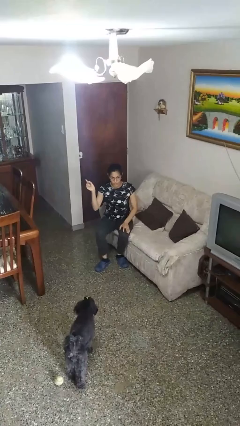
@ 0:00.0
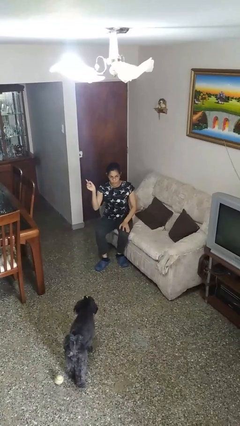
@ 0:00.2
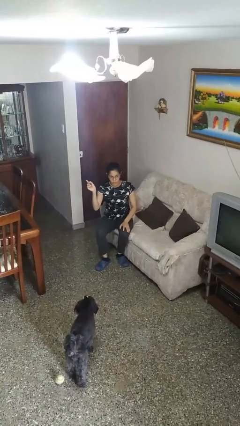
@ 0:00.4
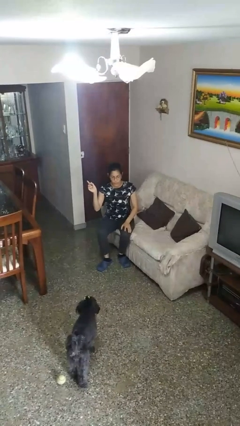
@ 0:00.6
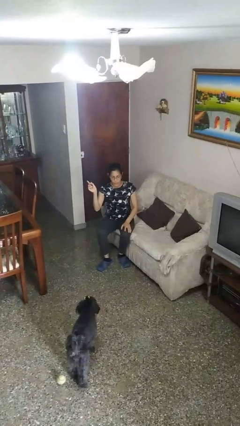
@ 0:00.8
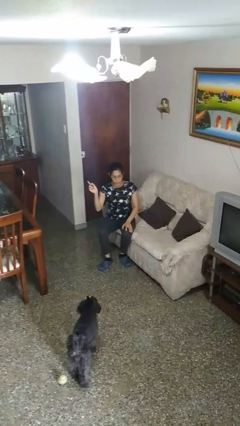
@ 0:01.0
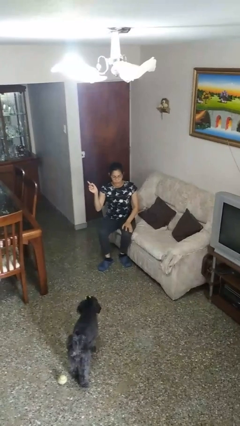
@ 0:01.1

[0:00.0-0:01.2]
person gestures swipe right

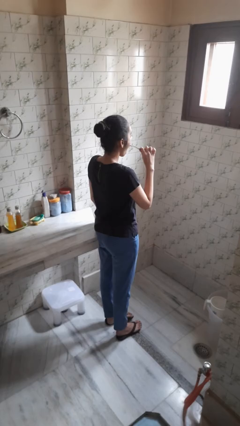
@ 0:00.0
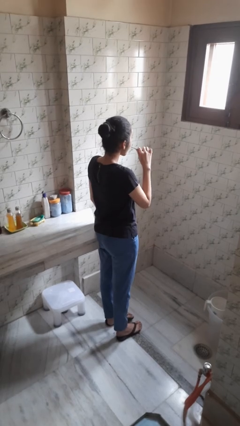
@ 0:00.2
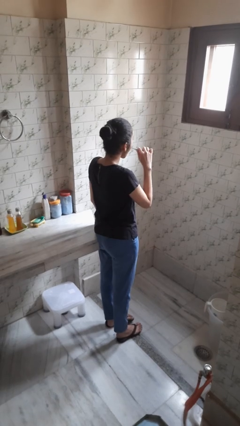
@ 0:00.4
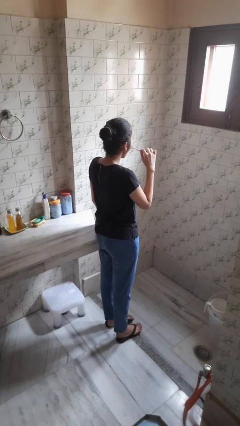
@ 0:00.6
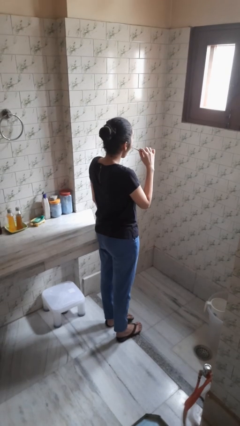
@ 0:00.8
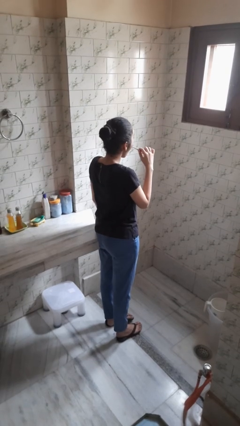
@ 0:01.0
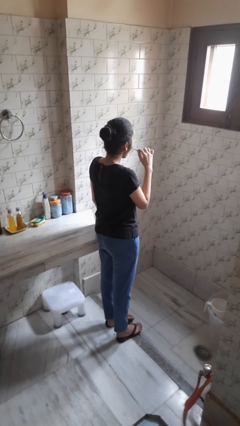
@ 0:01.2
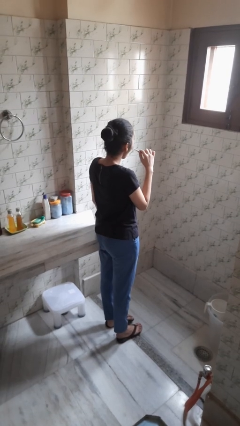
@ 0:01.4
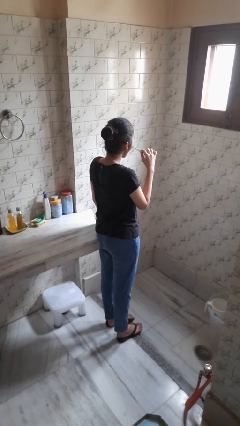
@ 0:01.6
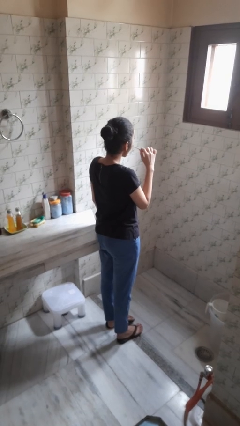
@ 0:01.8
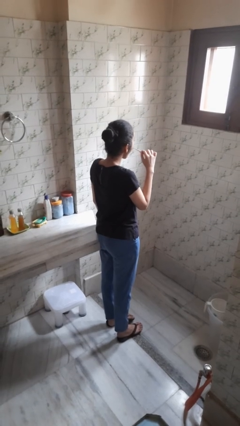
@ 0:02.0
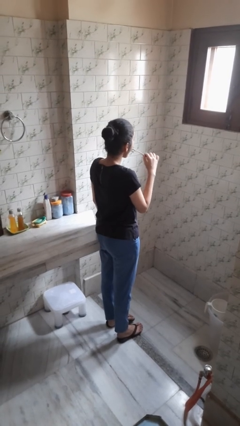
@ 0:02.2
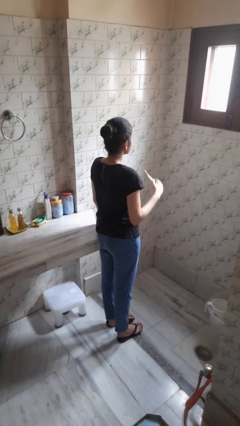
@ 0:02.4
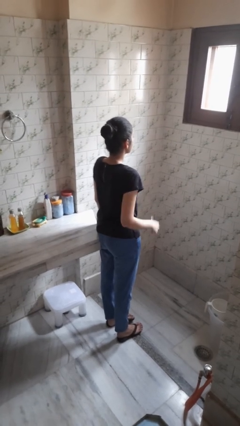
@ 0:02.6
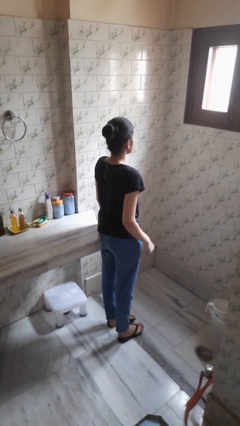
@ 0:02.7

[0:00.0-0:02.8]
person brushes teeth

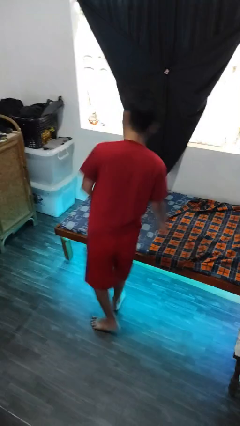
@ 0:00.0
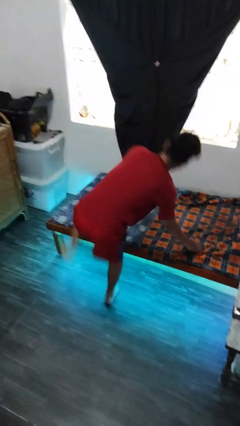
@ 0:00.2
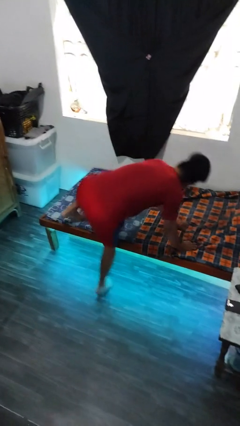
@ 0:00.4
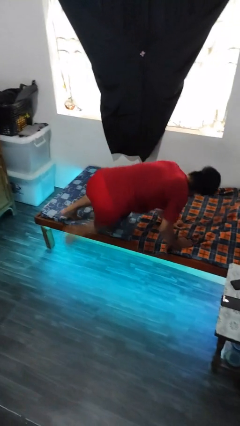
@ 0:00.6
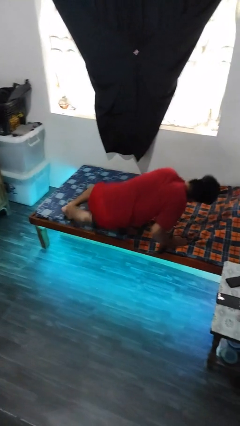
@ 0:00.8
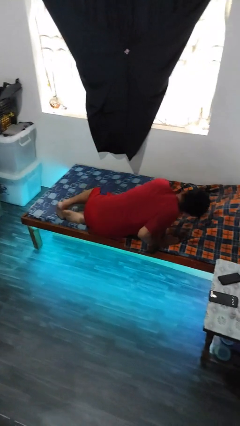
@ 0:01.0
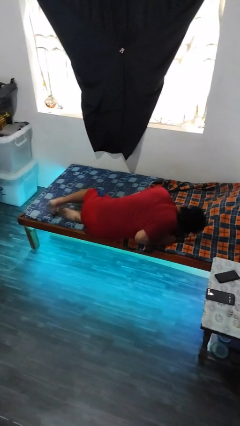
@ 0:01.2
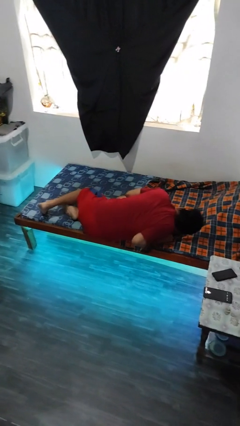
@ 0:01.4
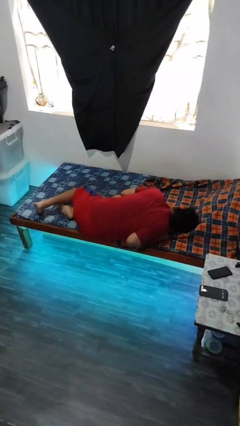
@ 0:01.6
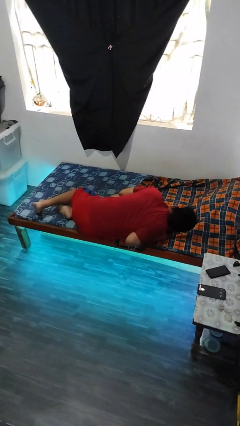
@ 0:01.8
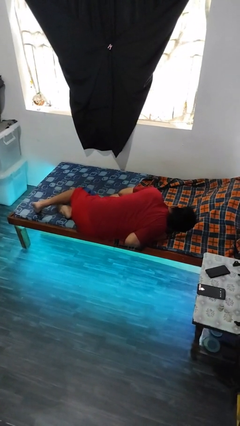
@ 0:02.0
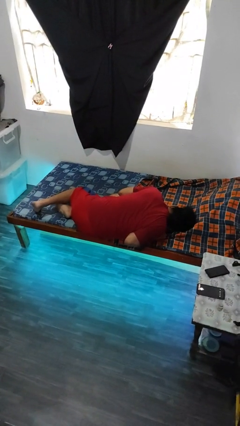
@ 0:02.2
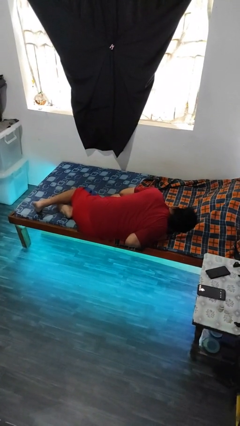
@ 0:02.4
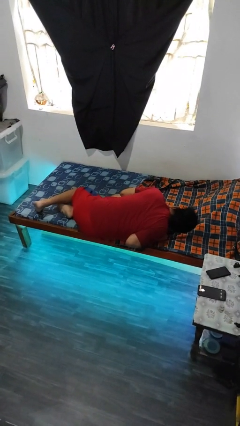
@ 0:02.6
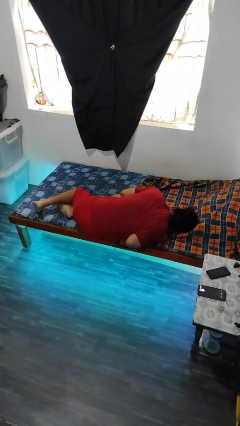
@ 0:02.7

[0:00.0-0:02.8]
person lies down on bed

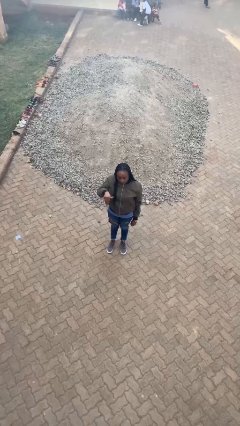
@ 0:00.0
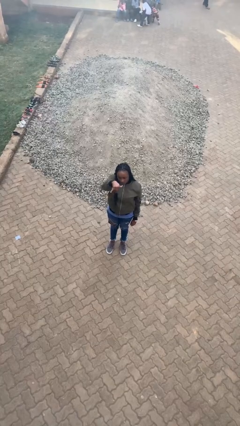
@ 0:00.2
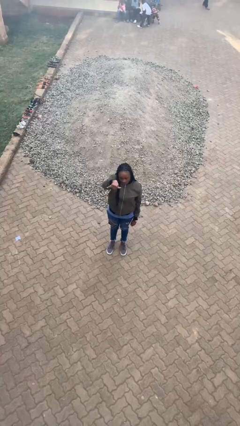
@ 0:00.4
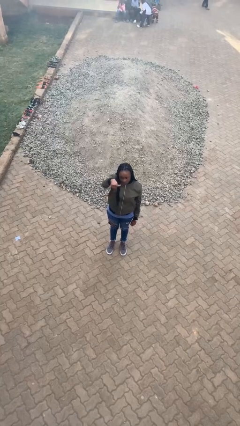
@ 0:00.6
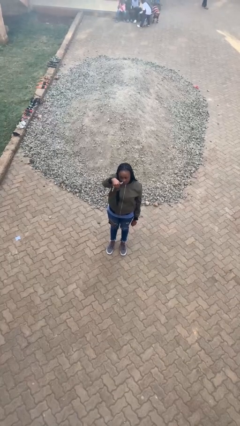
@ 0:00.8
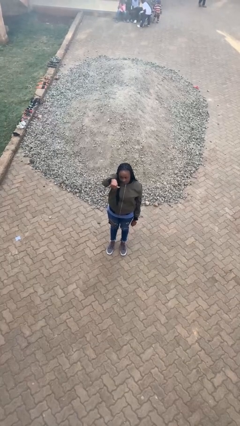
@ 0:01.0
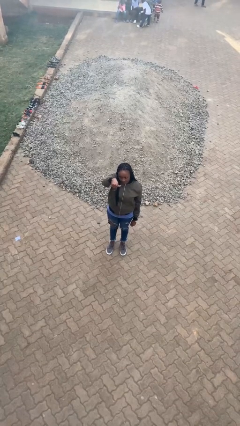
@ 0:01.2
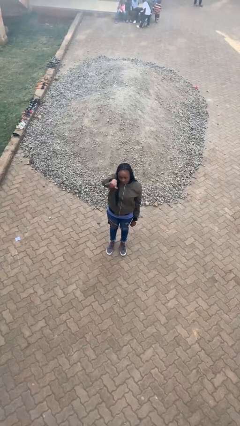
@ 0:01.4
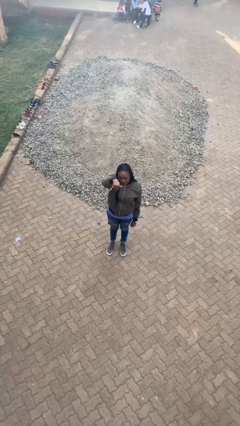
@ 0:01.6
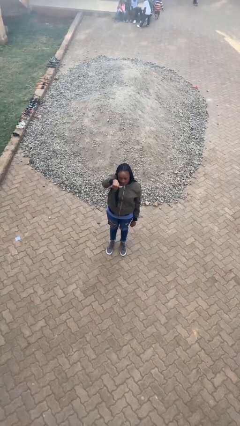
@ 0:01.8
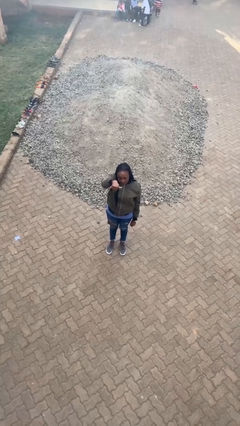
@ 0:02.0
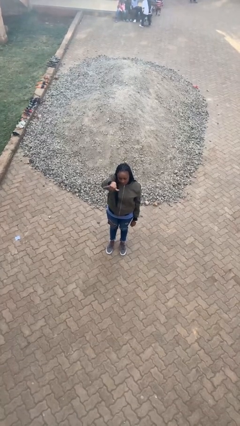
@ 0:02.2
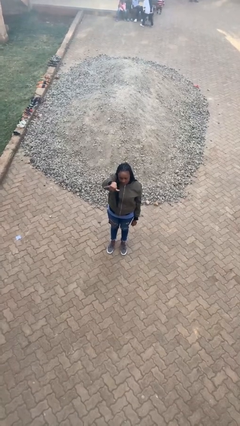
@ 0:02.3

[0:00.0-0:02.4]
person gestures hang loose

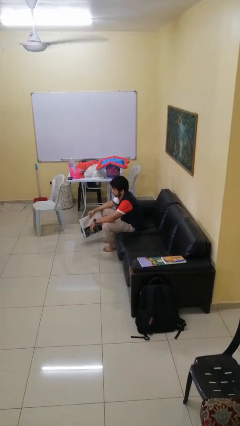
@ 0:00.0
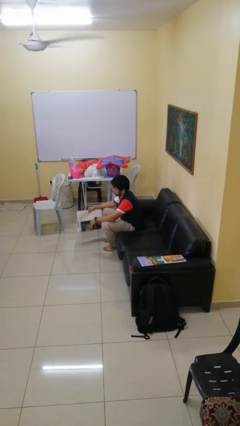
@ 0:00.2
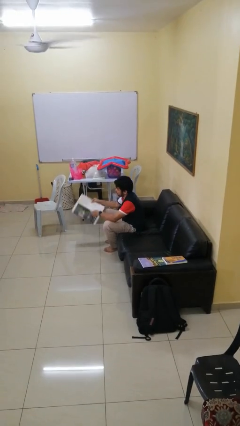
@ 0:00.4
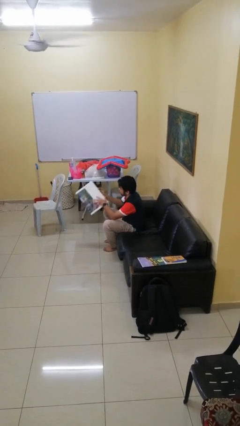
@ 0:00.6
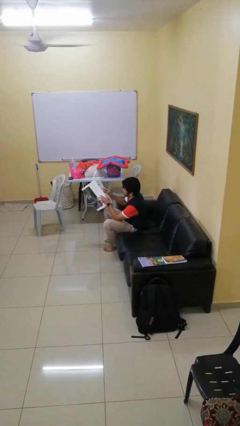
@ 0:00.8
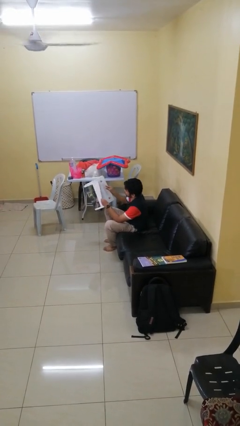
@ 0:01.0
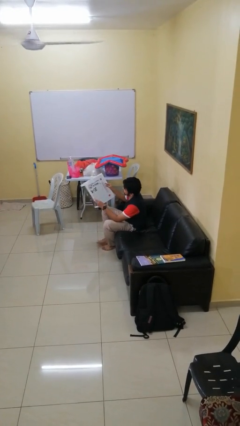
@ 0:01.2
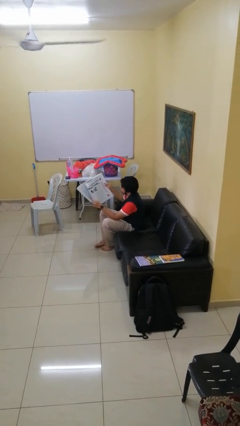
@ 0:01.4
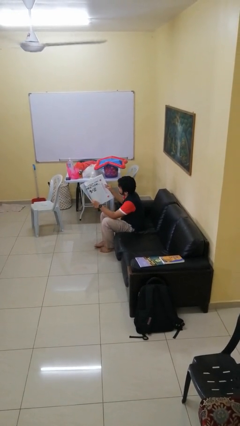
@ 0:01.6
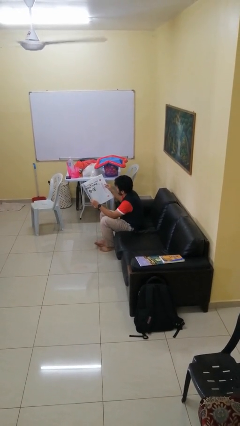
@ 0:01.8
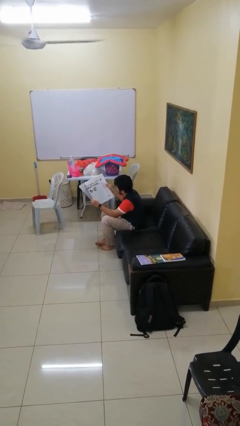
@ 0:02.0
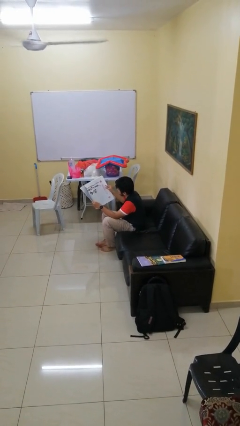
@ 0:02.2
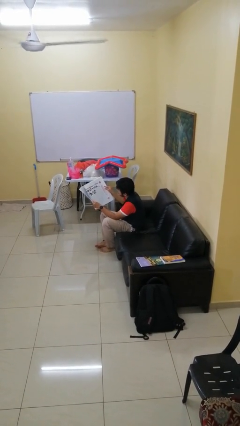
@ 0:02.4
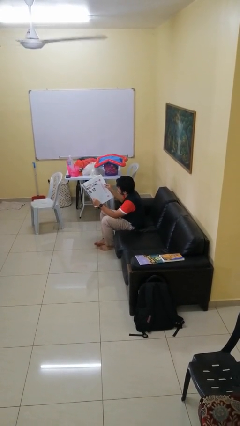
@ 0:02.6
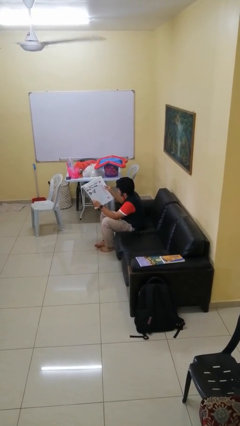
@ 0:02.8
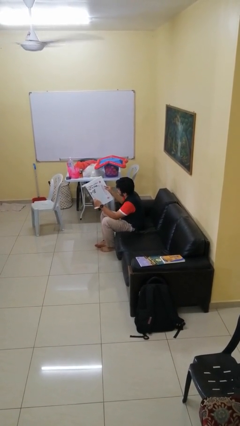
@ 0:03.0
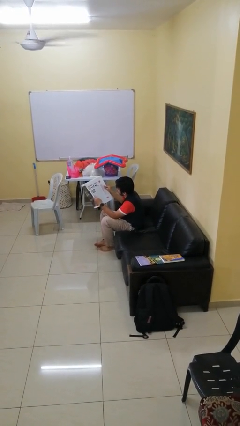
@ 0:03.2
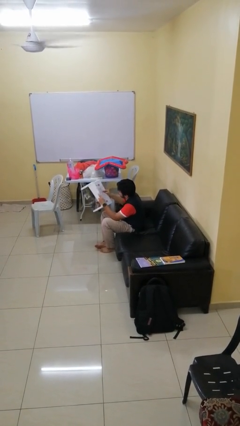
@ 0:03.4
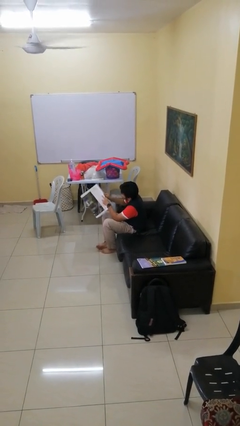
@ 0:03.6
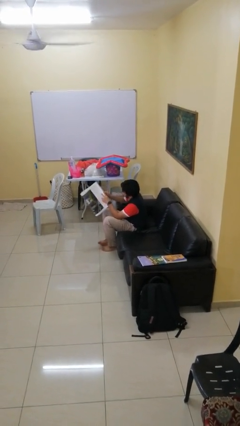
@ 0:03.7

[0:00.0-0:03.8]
person reads newspaper

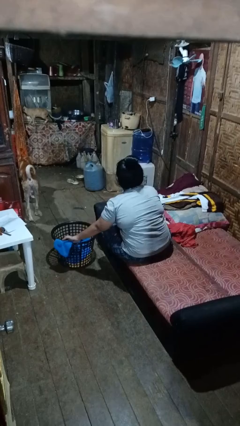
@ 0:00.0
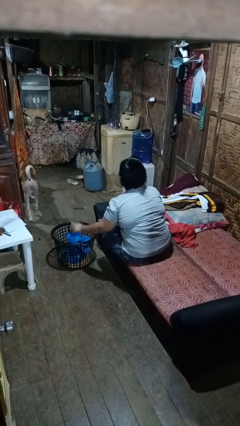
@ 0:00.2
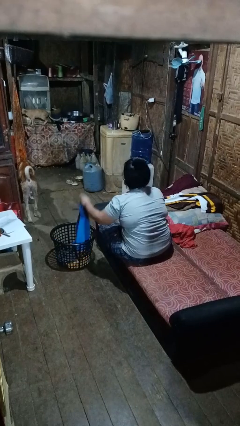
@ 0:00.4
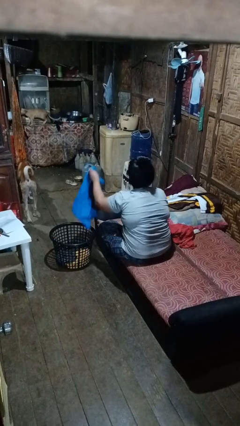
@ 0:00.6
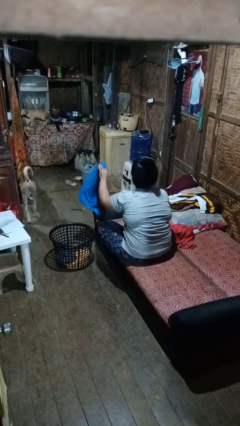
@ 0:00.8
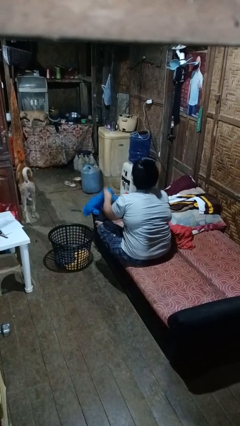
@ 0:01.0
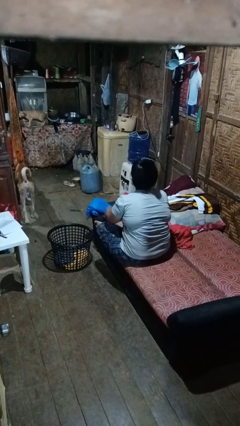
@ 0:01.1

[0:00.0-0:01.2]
person takes object from basket

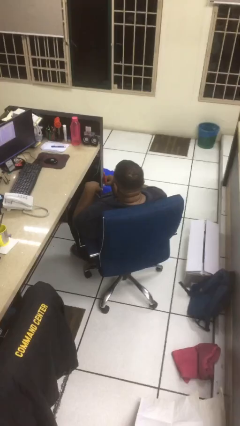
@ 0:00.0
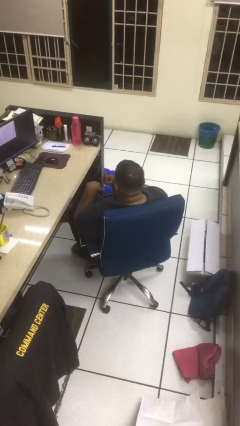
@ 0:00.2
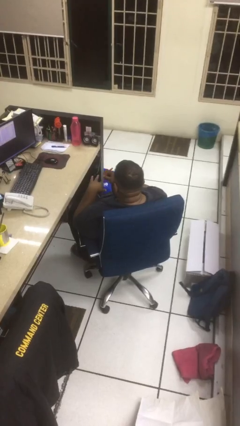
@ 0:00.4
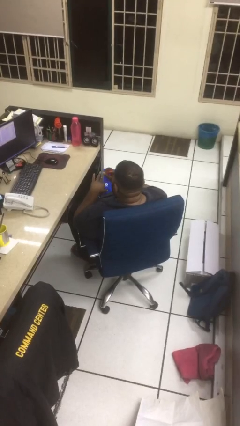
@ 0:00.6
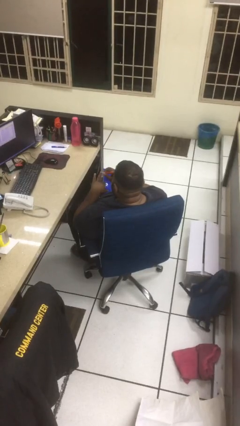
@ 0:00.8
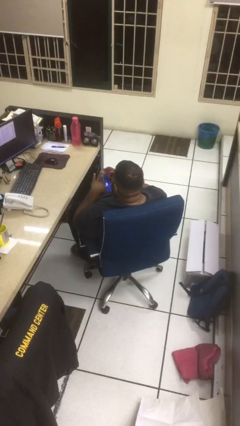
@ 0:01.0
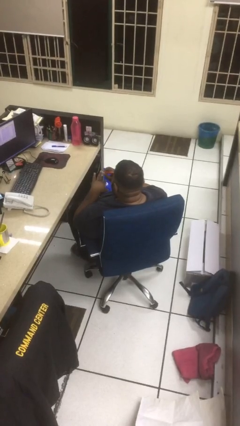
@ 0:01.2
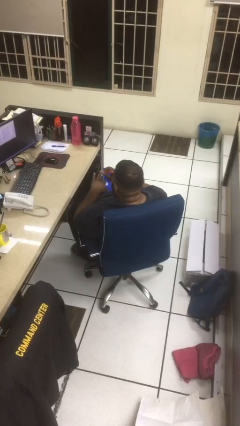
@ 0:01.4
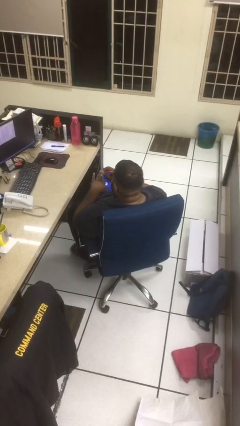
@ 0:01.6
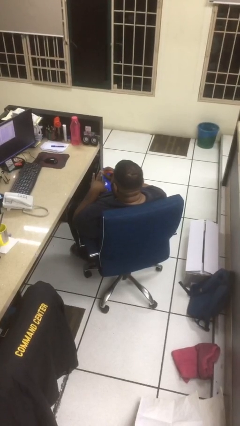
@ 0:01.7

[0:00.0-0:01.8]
person paints fingernails

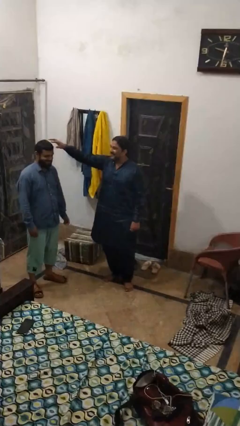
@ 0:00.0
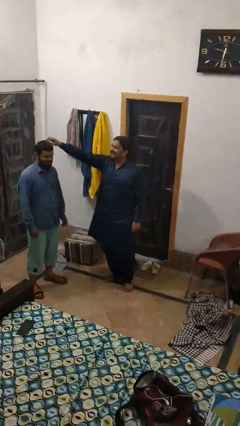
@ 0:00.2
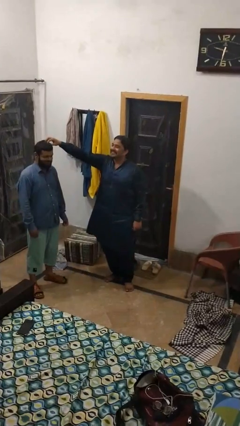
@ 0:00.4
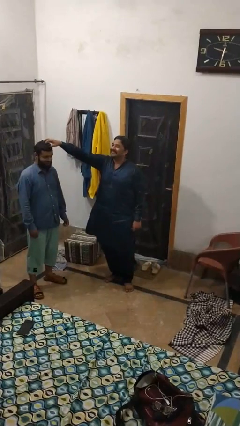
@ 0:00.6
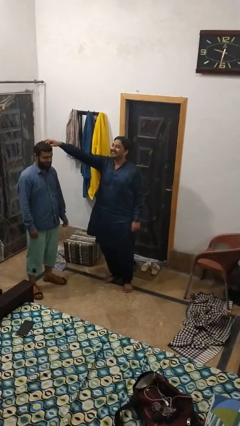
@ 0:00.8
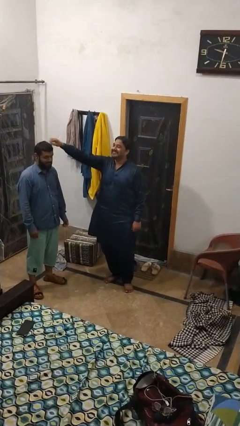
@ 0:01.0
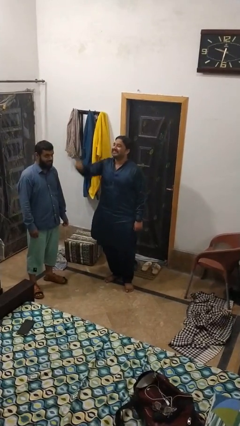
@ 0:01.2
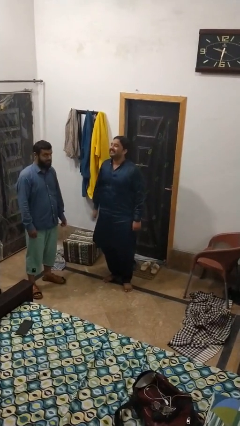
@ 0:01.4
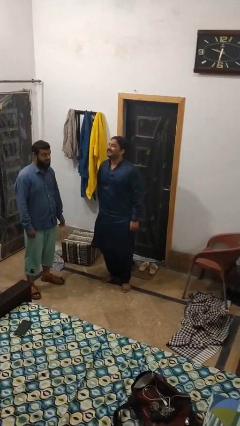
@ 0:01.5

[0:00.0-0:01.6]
person grabs person by hair
